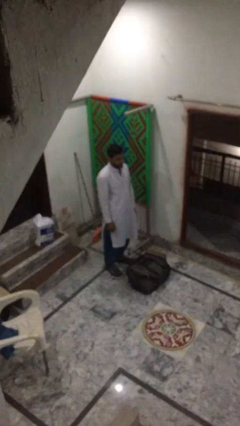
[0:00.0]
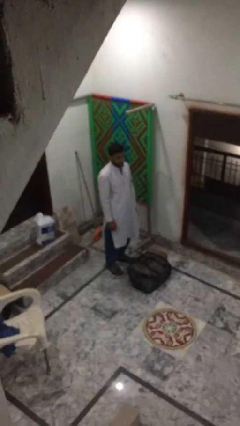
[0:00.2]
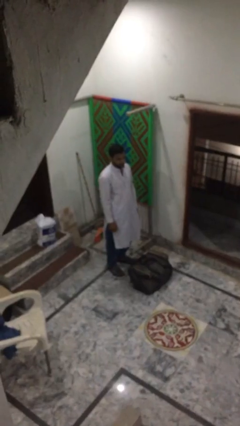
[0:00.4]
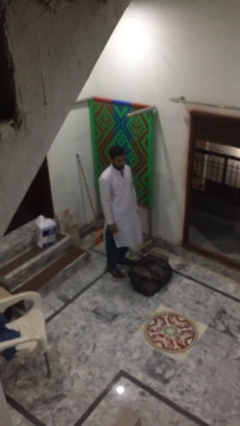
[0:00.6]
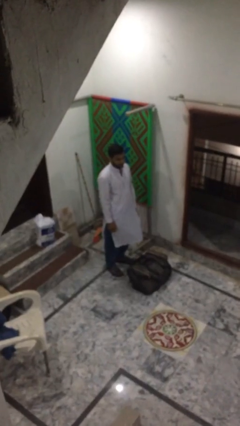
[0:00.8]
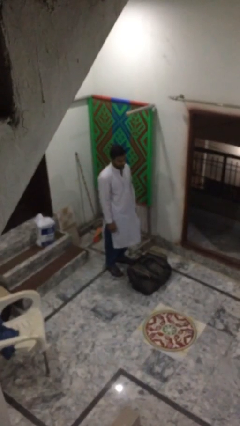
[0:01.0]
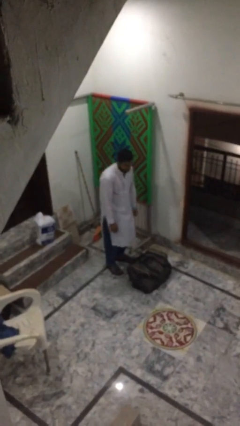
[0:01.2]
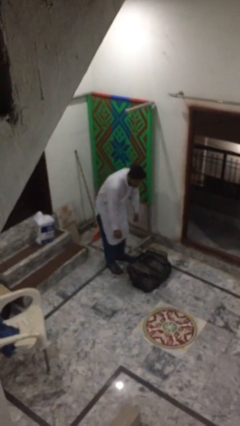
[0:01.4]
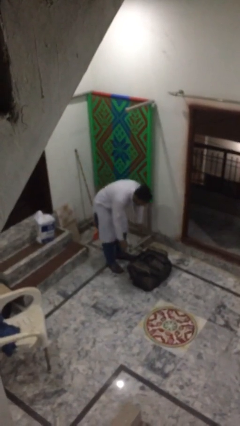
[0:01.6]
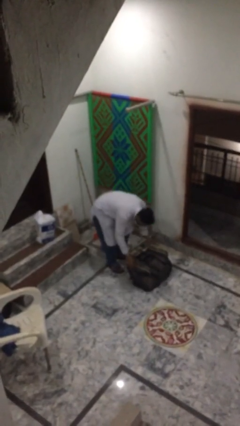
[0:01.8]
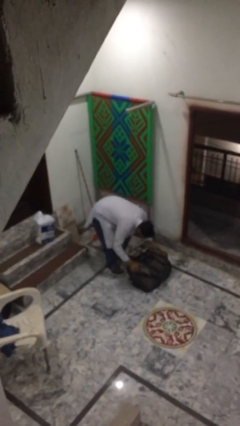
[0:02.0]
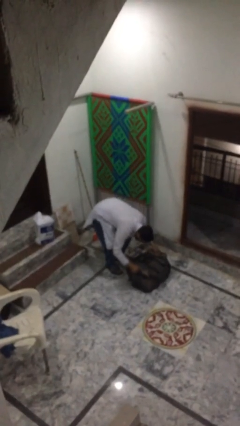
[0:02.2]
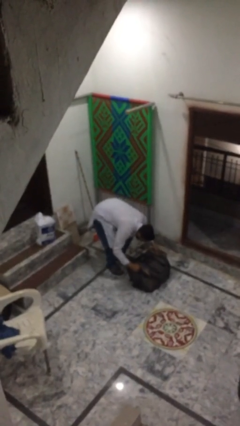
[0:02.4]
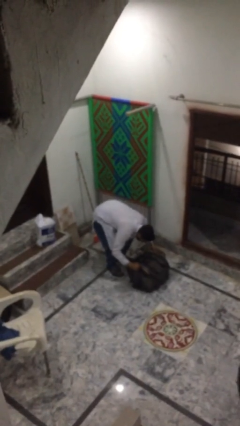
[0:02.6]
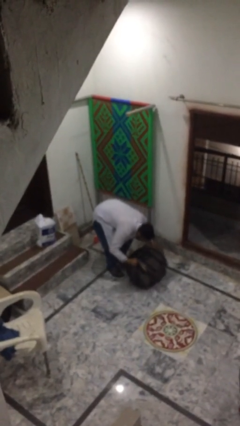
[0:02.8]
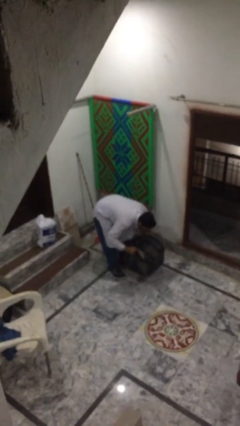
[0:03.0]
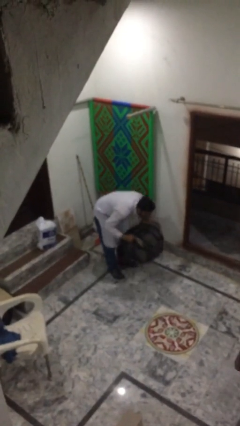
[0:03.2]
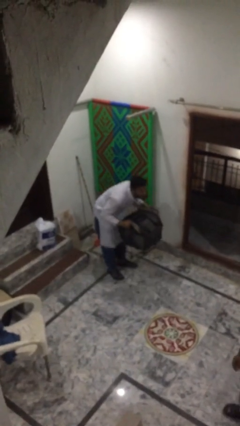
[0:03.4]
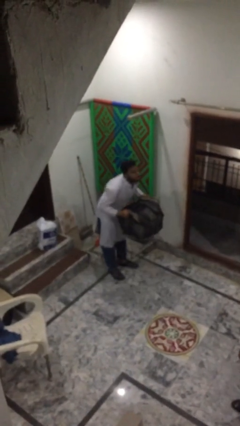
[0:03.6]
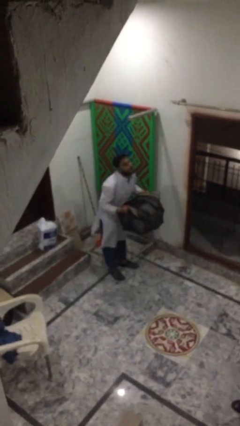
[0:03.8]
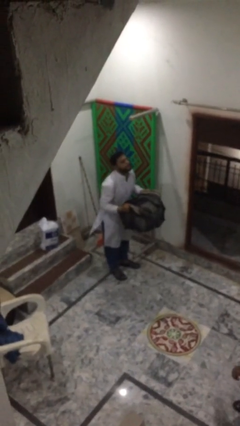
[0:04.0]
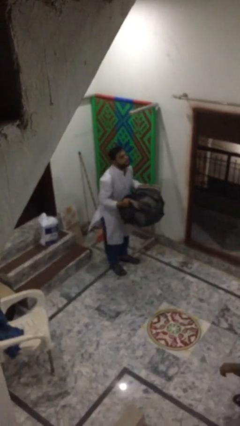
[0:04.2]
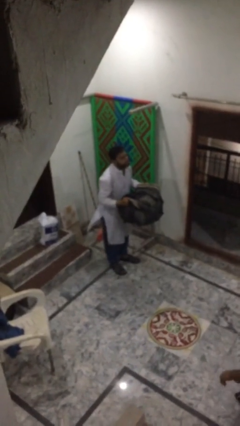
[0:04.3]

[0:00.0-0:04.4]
person picks up object from floor

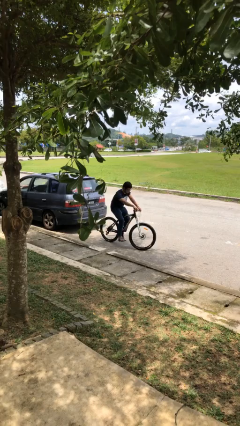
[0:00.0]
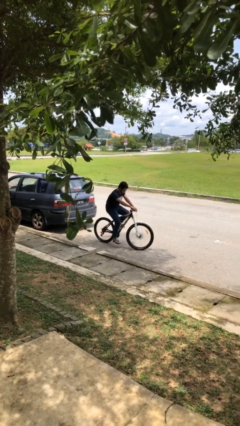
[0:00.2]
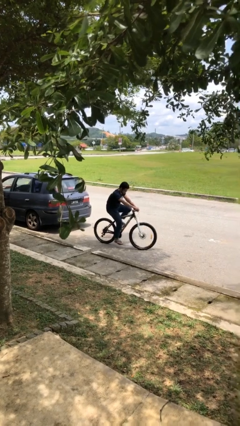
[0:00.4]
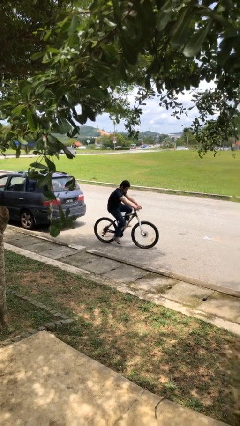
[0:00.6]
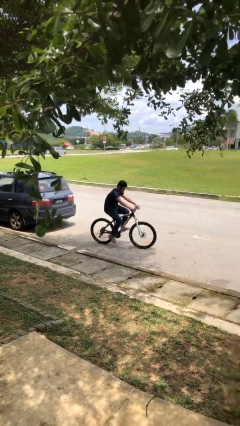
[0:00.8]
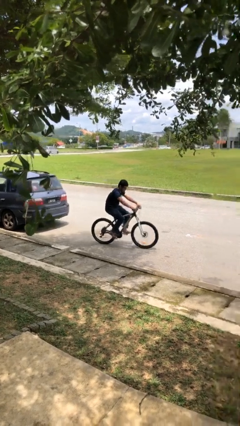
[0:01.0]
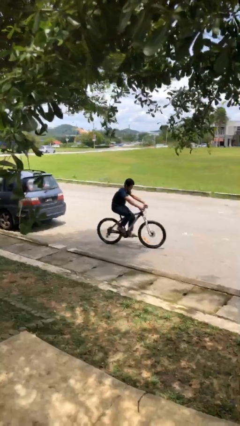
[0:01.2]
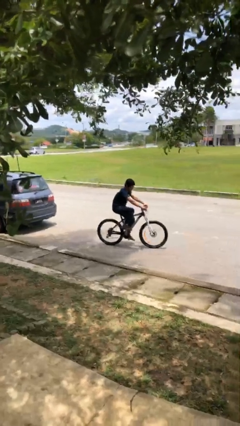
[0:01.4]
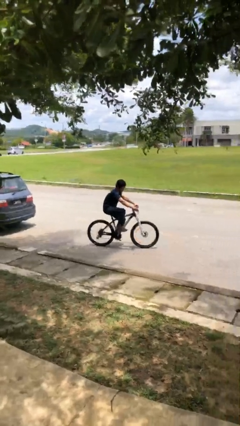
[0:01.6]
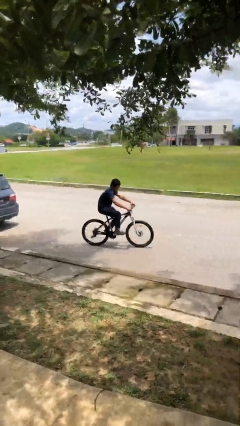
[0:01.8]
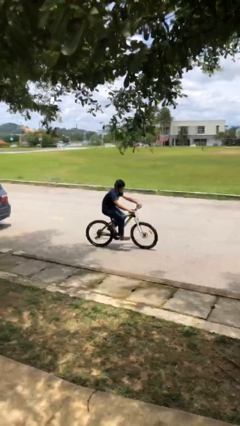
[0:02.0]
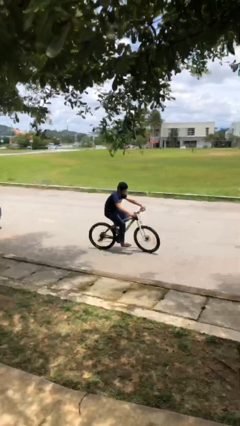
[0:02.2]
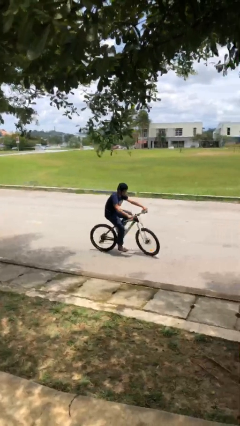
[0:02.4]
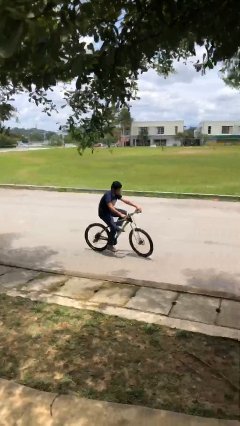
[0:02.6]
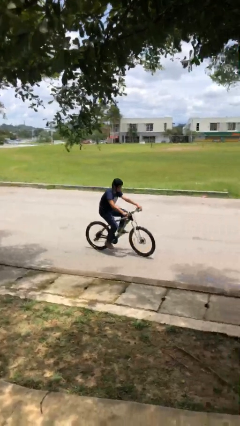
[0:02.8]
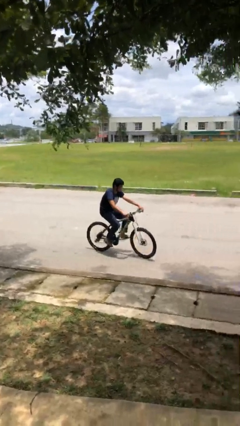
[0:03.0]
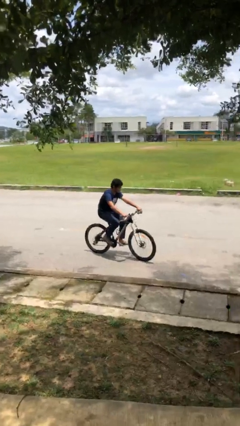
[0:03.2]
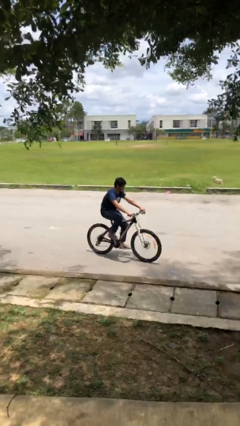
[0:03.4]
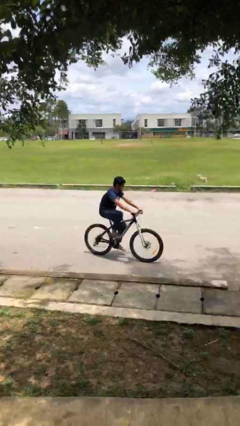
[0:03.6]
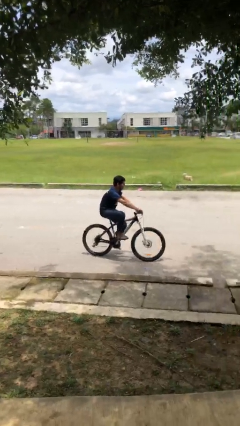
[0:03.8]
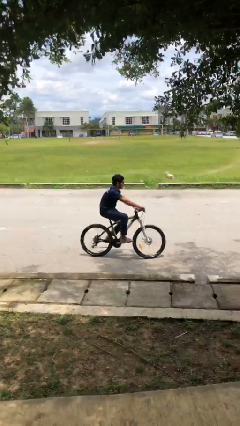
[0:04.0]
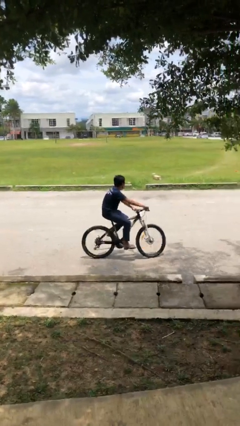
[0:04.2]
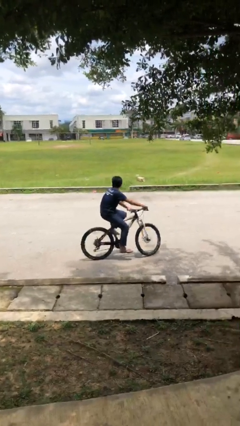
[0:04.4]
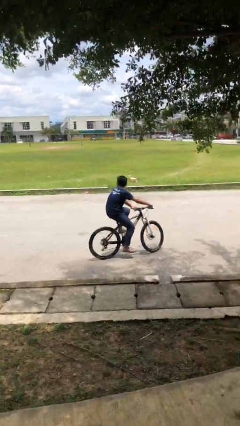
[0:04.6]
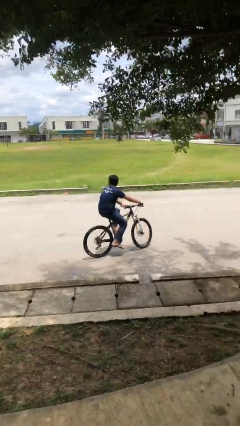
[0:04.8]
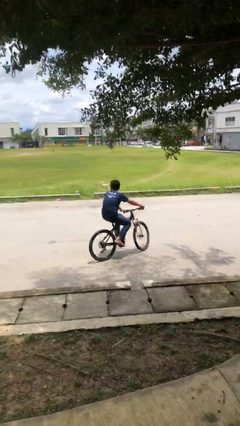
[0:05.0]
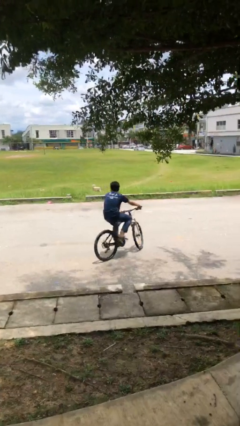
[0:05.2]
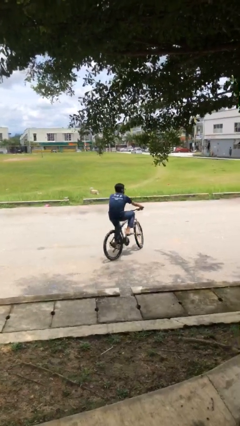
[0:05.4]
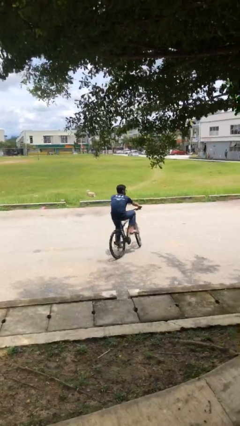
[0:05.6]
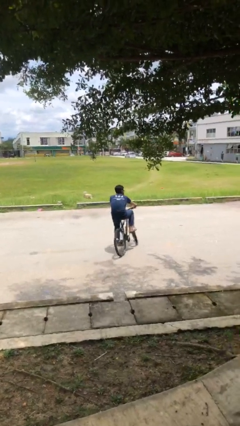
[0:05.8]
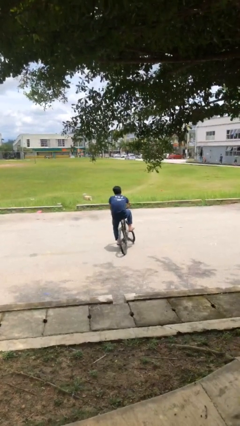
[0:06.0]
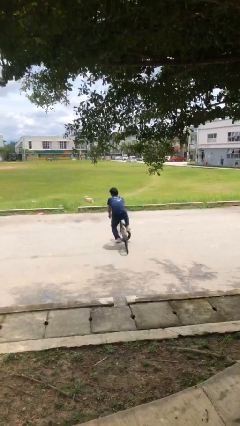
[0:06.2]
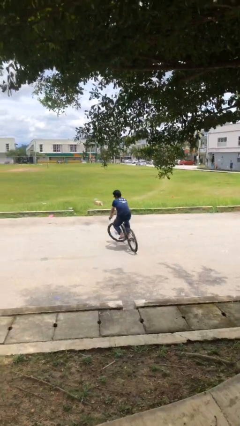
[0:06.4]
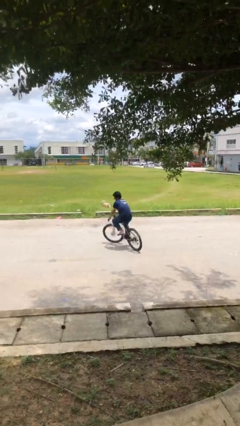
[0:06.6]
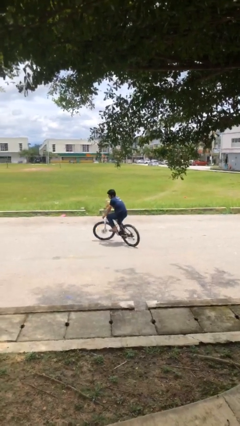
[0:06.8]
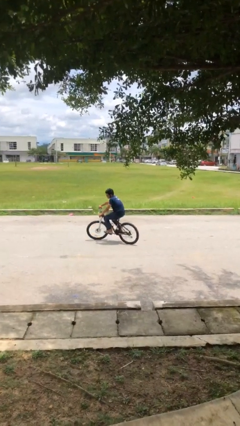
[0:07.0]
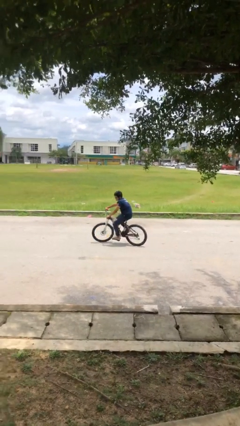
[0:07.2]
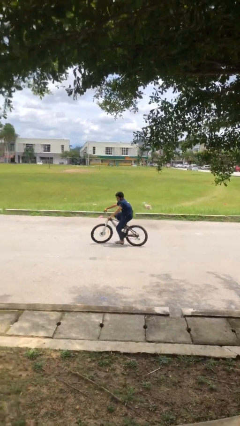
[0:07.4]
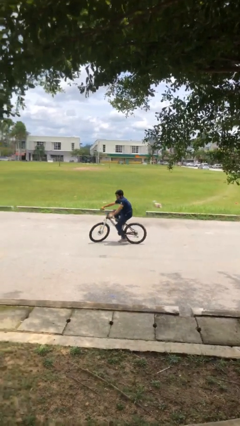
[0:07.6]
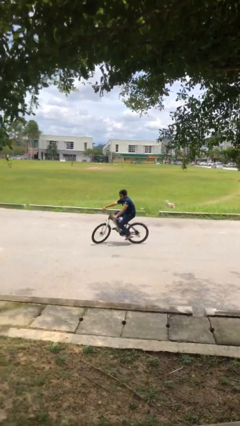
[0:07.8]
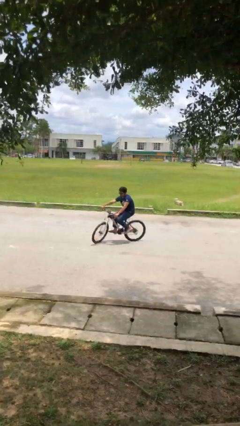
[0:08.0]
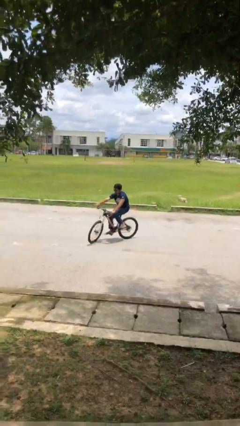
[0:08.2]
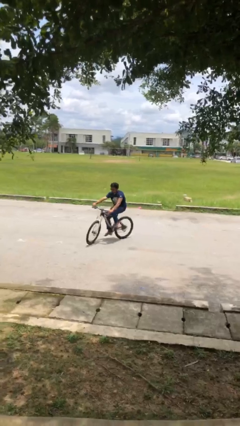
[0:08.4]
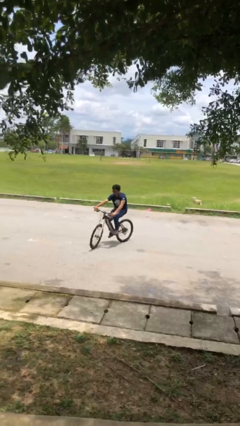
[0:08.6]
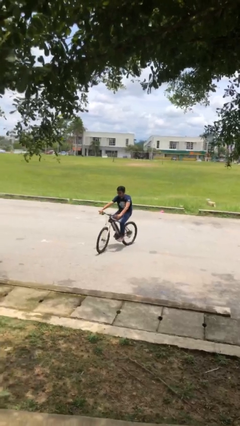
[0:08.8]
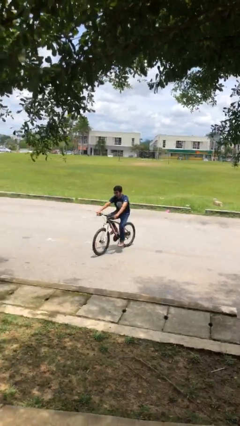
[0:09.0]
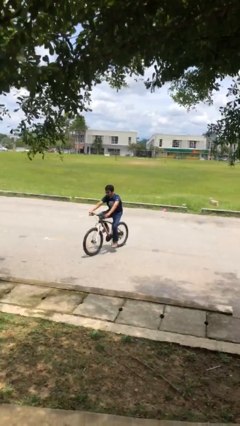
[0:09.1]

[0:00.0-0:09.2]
person rides bicycle

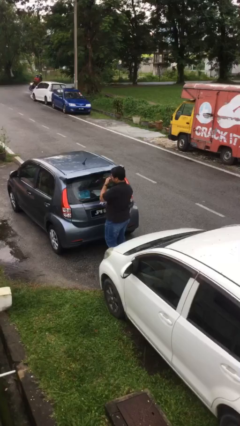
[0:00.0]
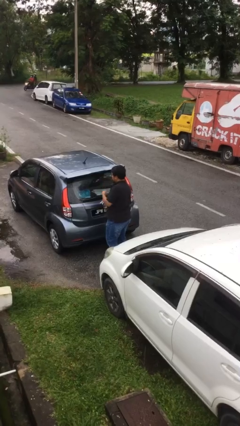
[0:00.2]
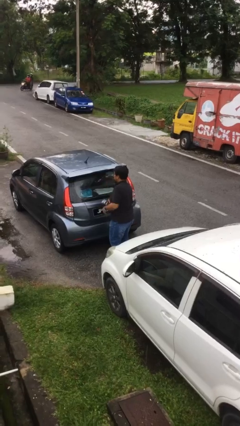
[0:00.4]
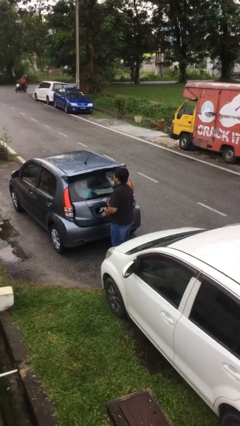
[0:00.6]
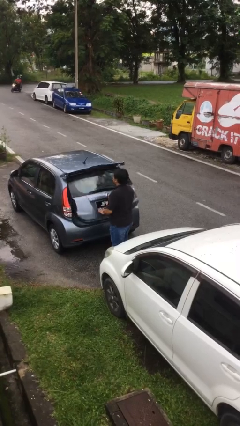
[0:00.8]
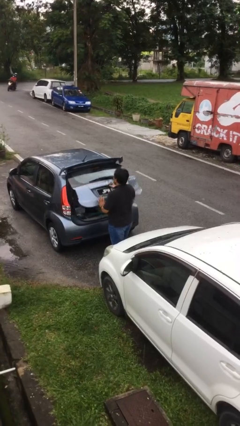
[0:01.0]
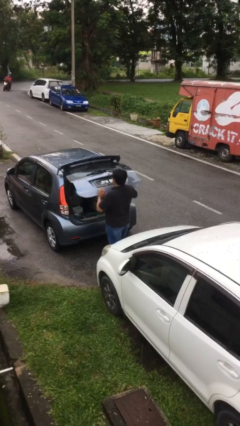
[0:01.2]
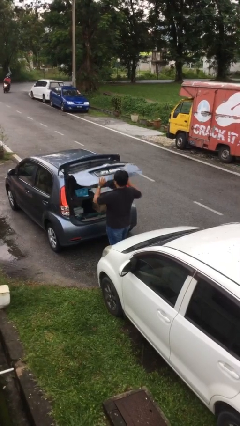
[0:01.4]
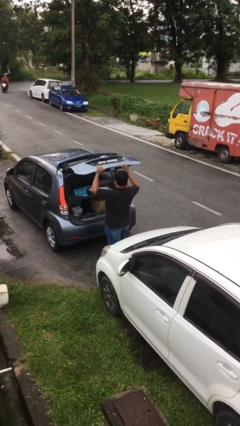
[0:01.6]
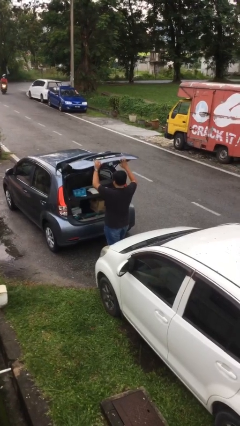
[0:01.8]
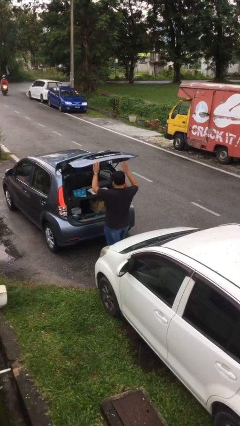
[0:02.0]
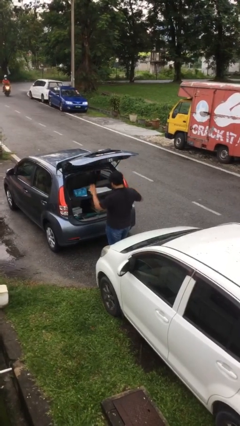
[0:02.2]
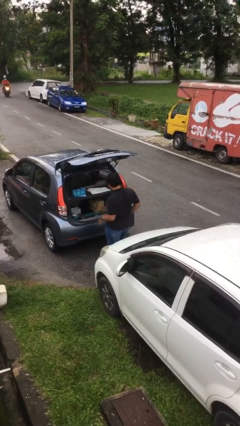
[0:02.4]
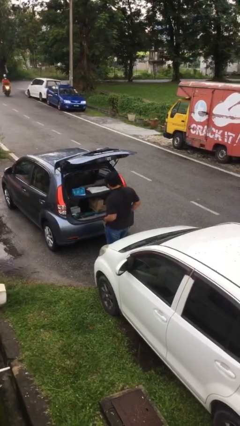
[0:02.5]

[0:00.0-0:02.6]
person opens car trunk

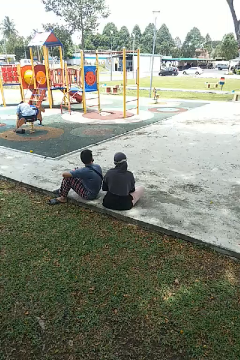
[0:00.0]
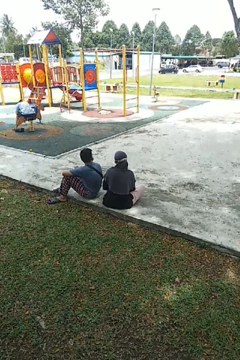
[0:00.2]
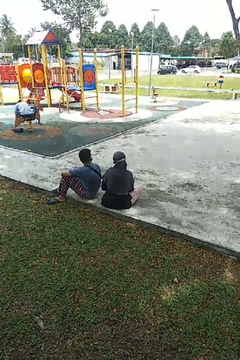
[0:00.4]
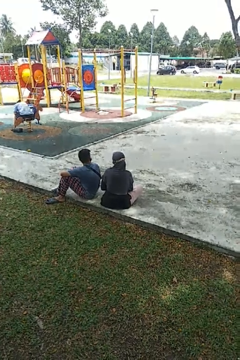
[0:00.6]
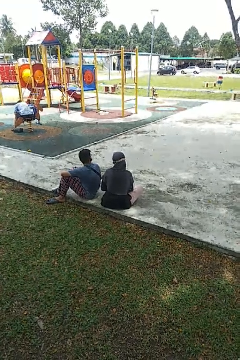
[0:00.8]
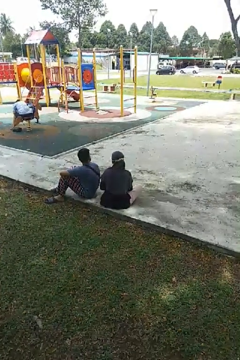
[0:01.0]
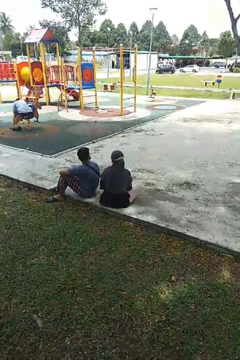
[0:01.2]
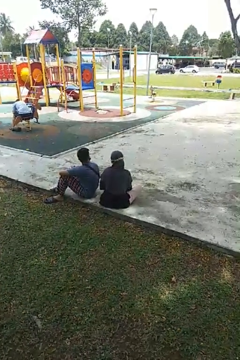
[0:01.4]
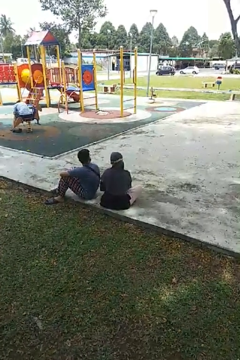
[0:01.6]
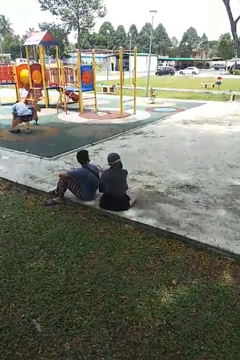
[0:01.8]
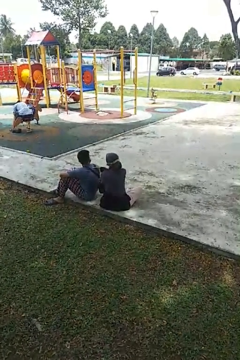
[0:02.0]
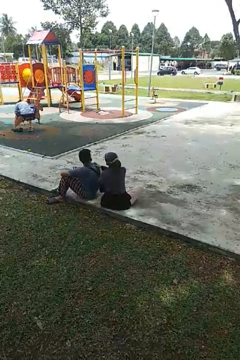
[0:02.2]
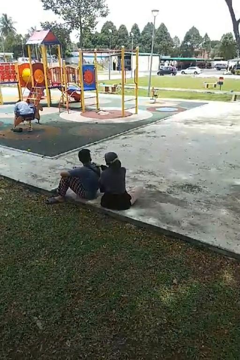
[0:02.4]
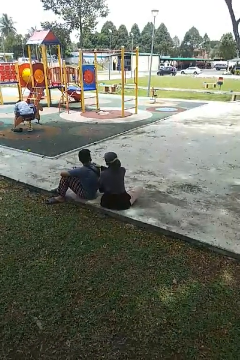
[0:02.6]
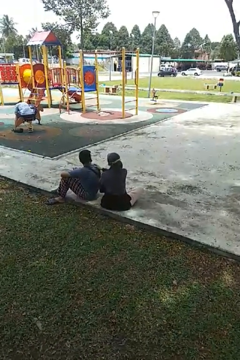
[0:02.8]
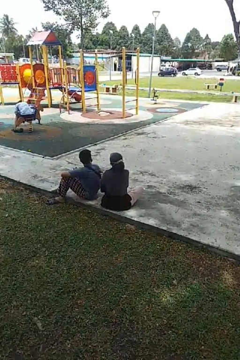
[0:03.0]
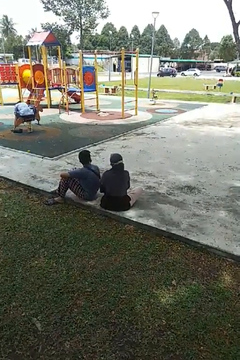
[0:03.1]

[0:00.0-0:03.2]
person pounds shoulders of person
